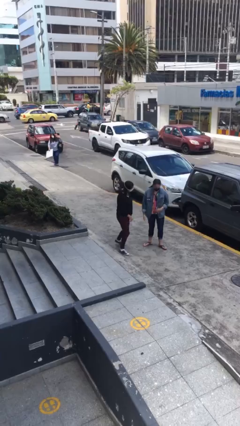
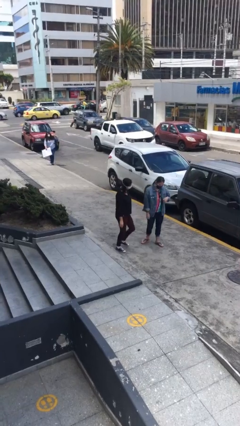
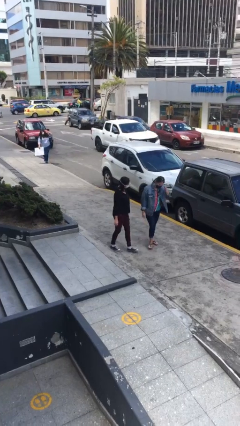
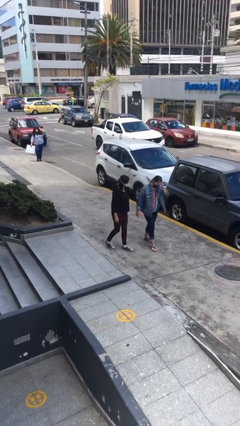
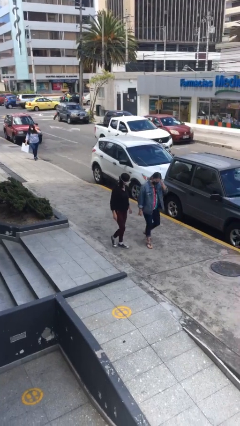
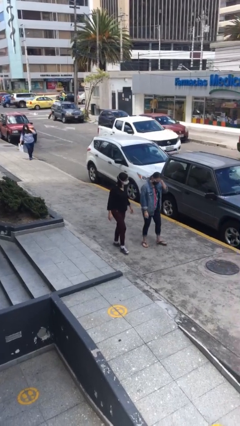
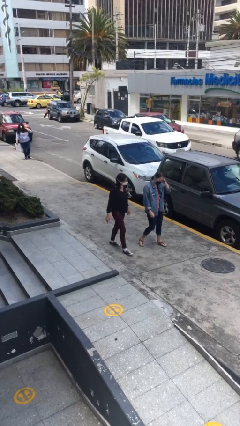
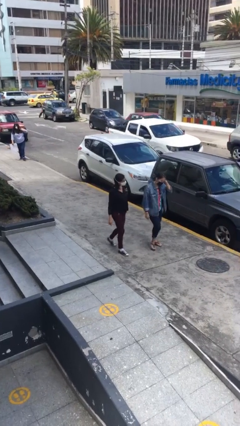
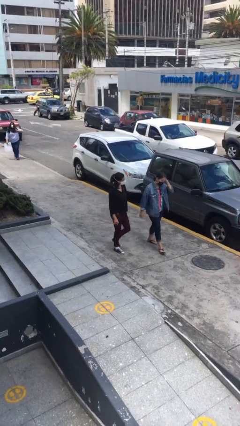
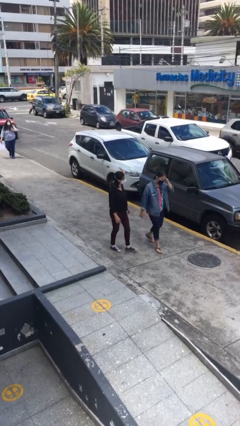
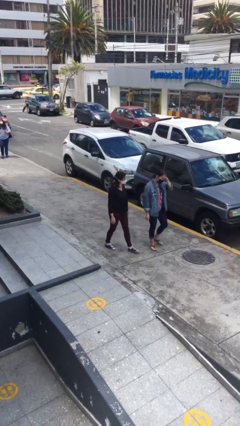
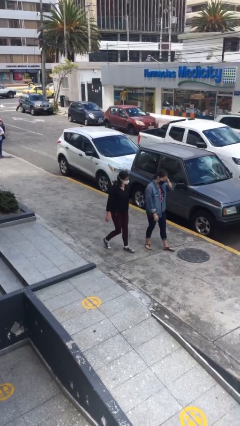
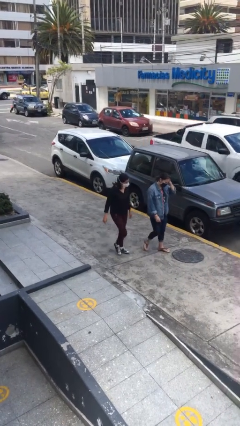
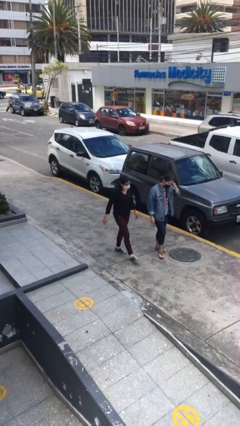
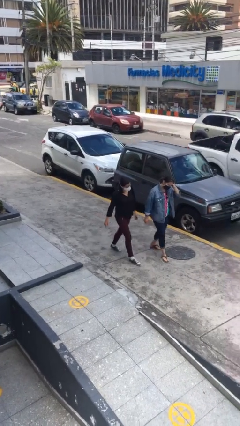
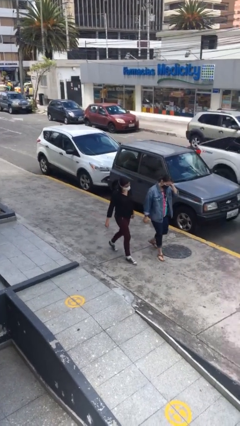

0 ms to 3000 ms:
person talks to person

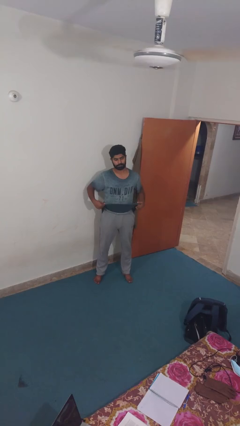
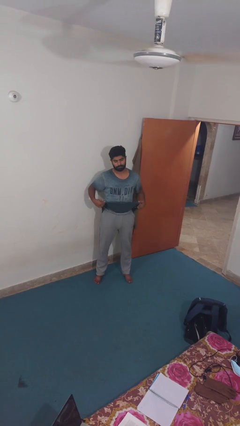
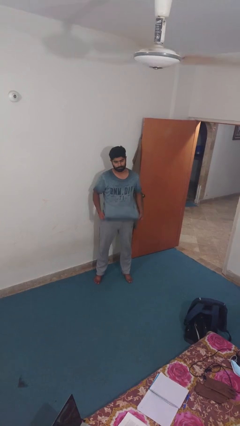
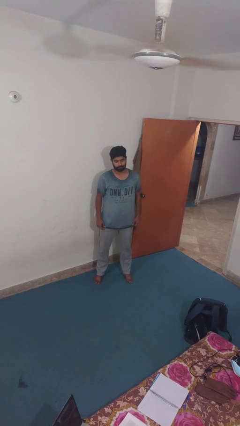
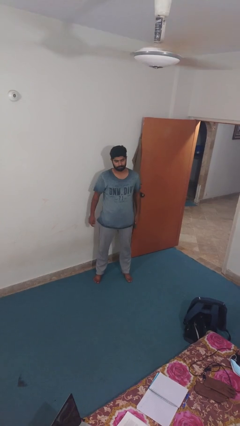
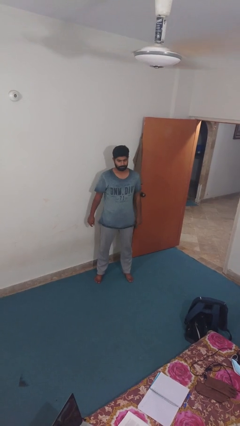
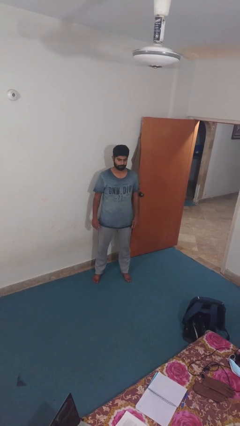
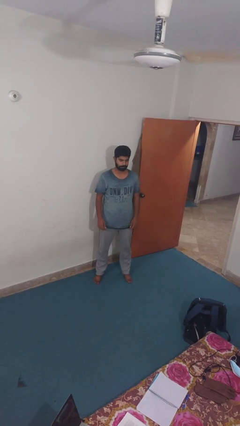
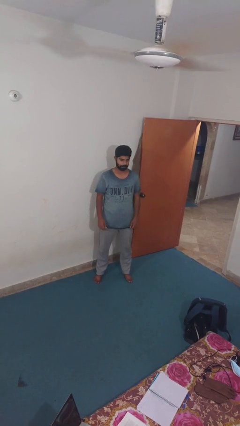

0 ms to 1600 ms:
person untucks shirt

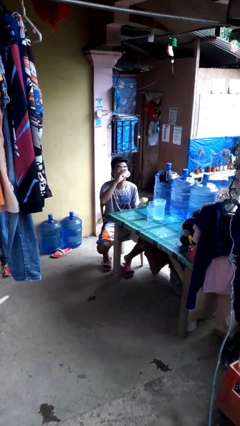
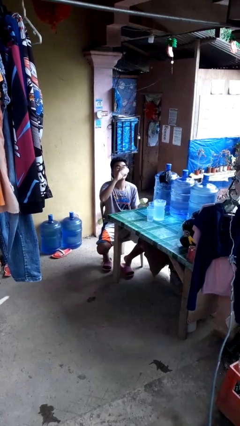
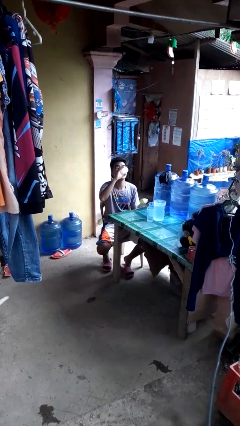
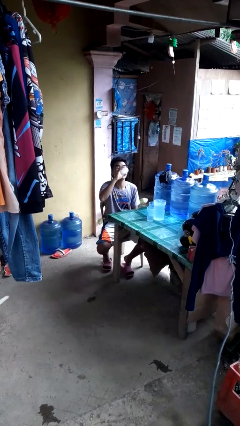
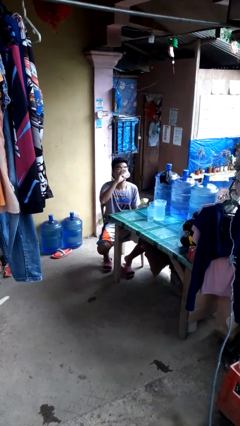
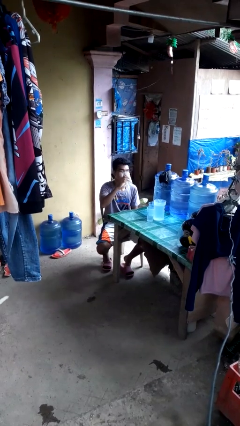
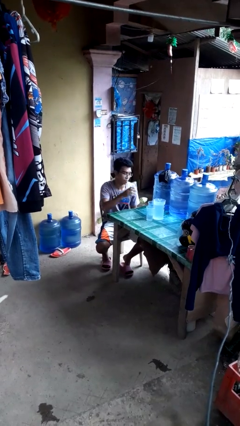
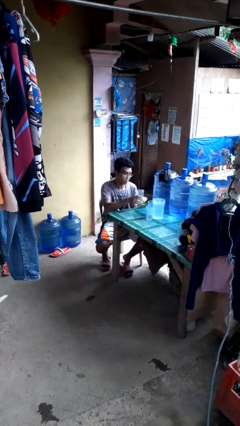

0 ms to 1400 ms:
person drinks from shotglass

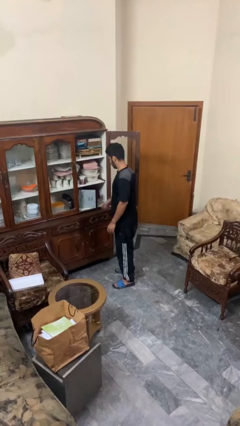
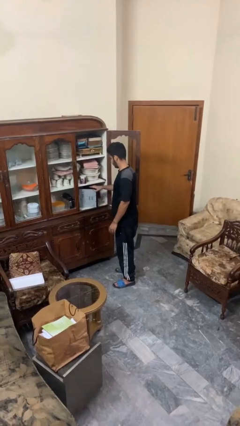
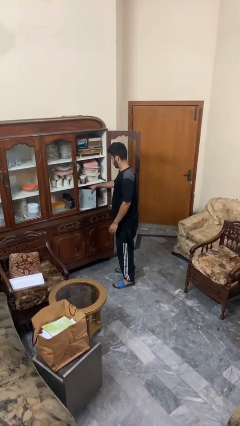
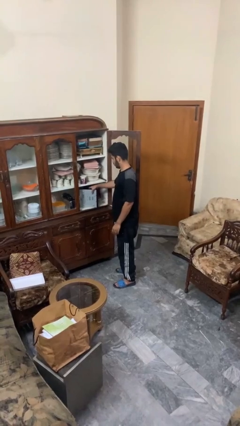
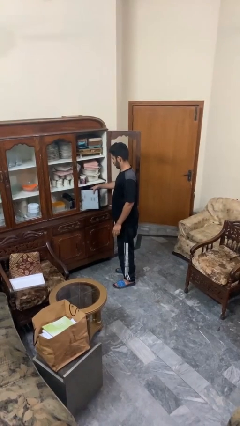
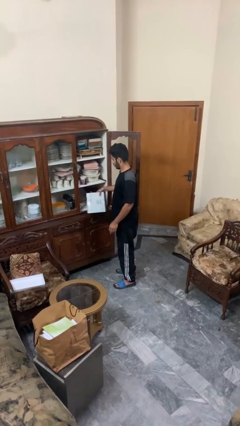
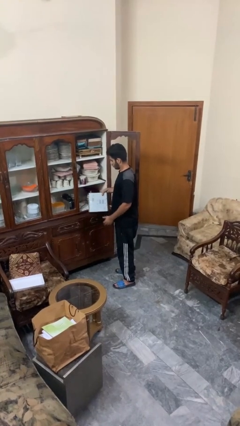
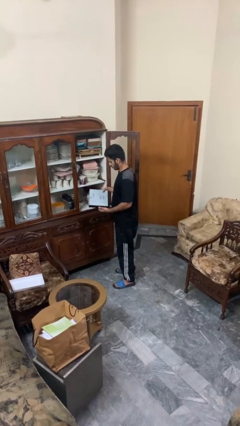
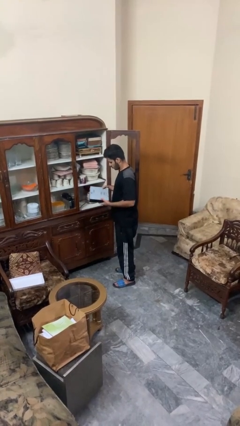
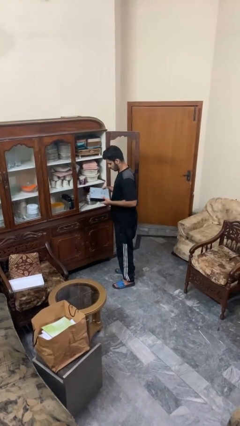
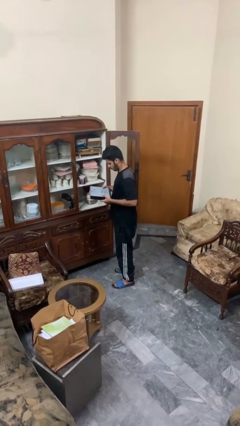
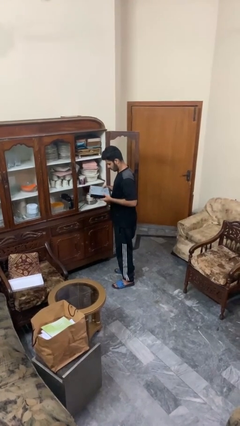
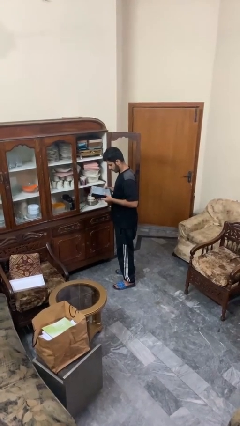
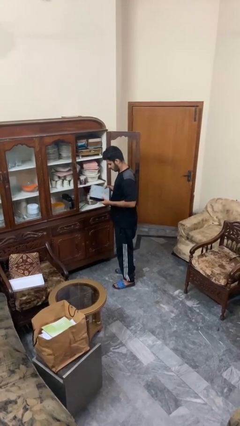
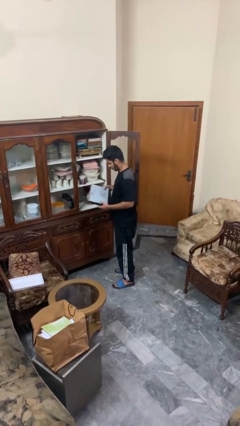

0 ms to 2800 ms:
person picks up object from cabinet

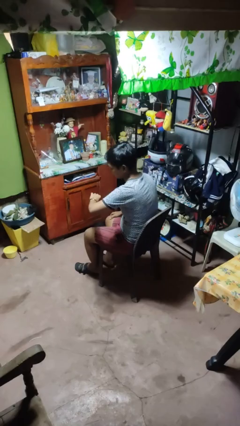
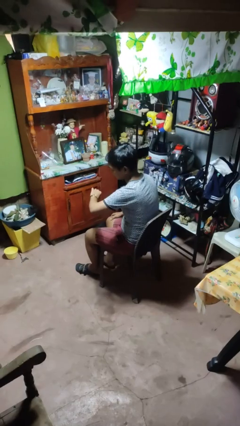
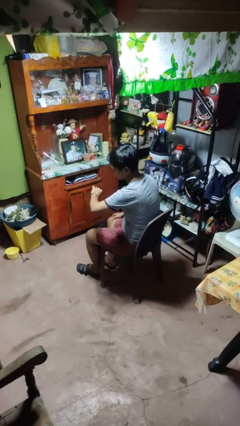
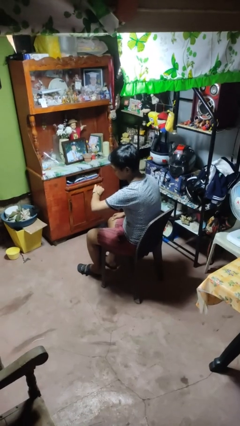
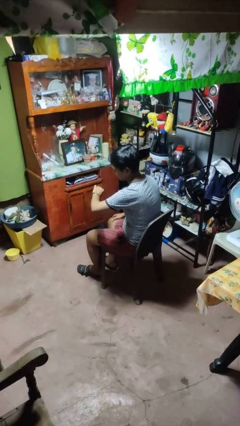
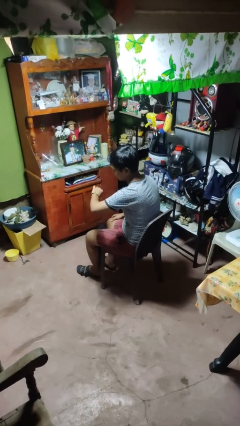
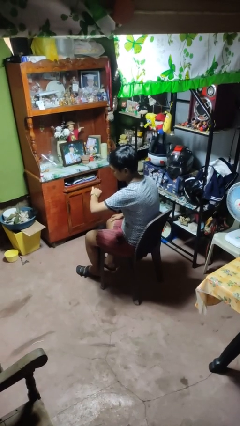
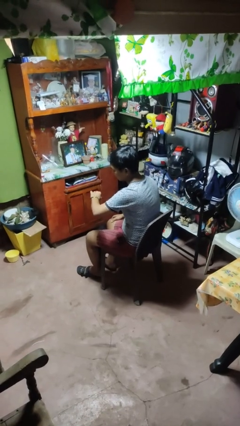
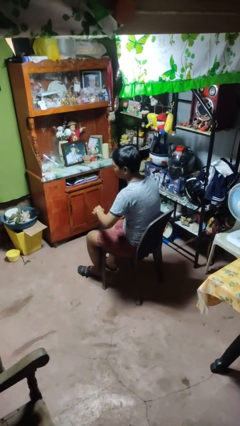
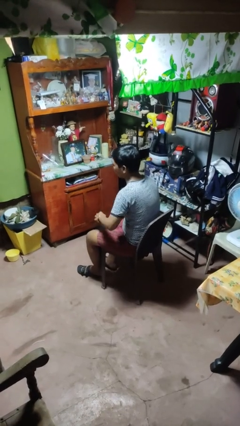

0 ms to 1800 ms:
person looks at wristwatch

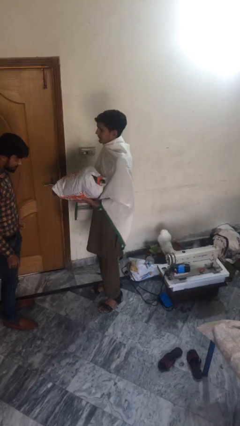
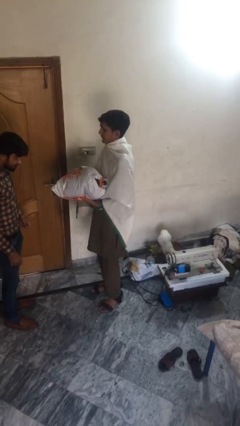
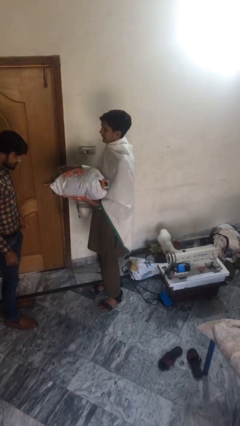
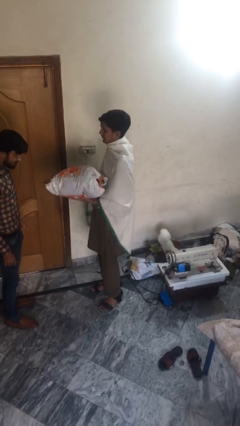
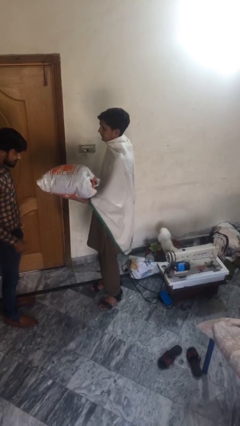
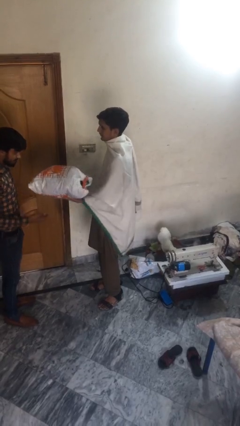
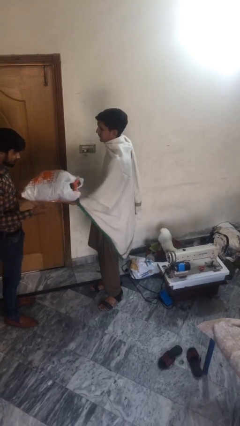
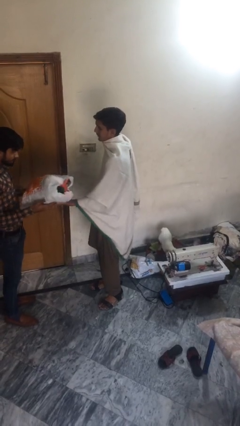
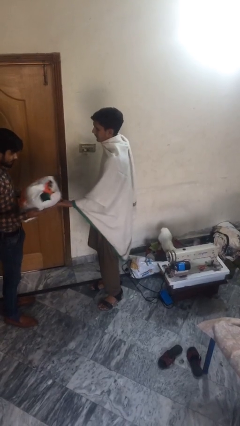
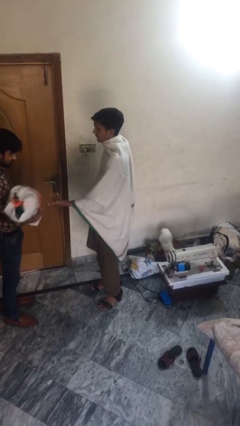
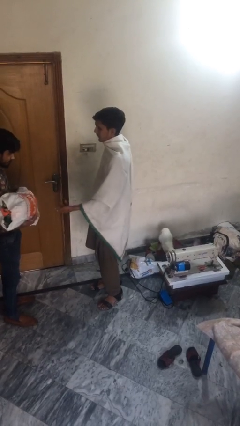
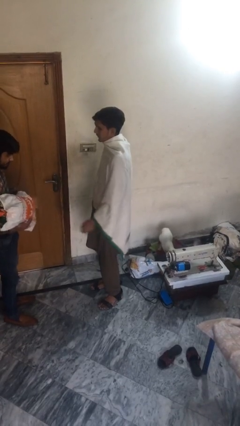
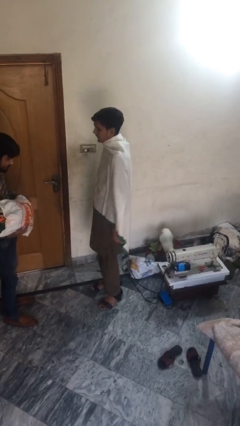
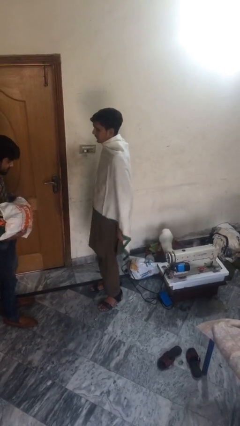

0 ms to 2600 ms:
person transfers object to person

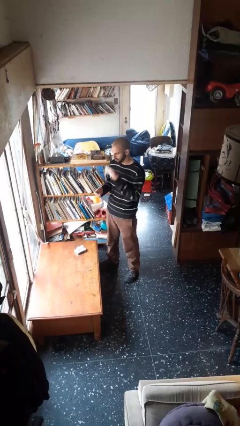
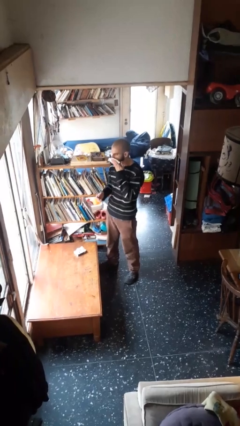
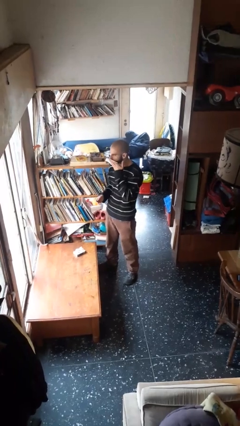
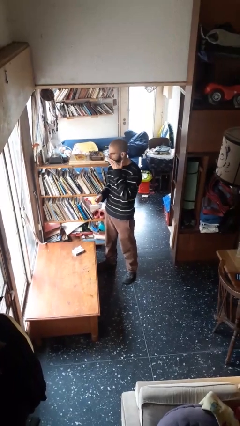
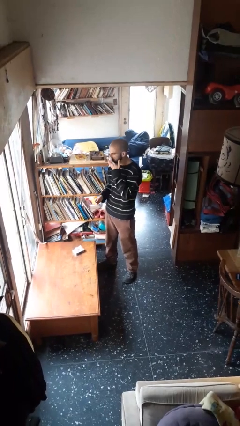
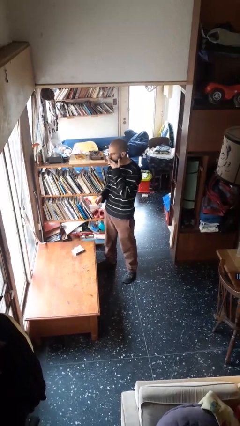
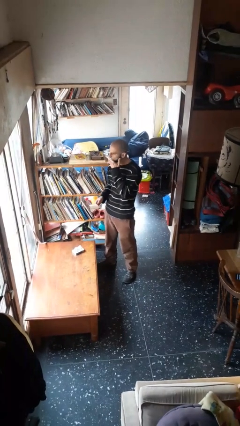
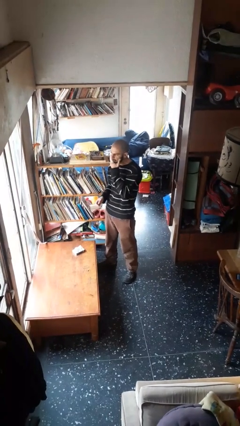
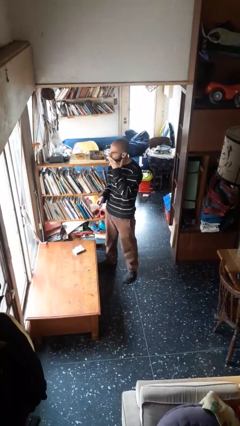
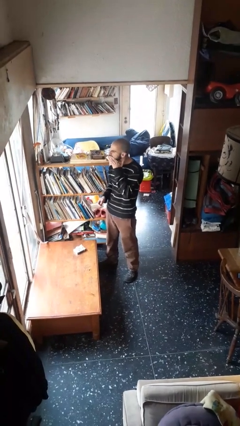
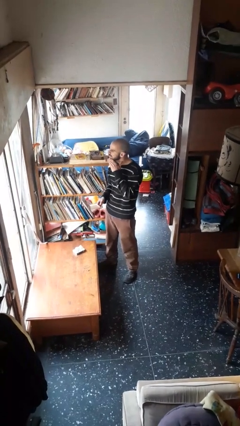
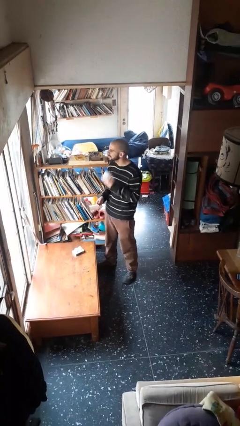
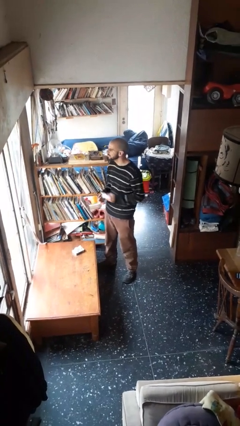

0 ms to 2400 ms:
person wipes mouth with napkin

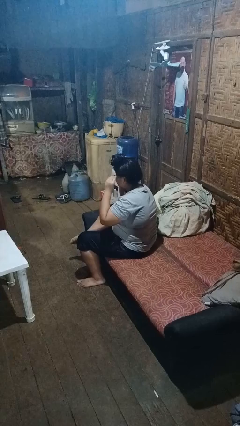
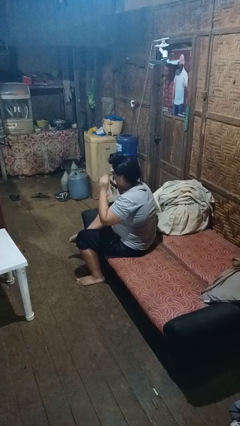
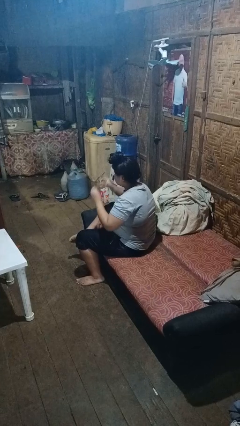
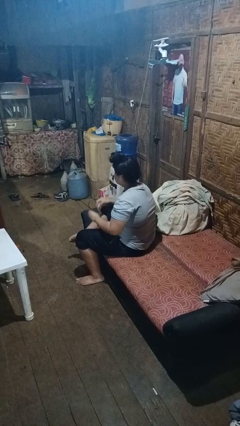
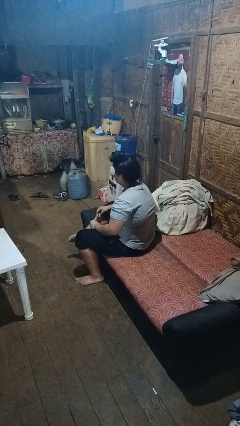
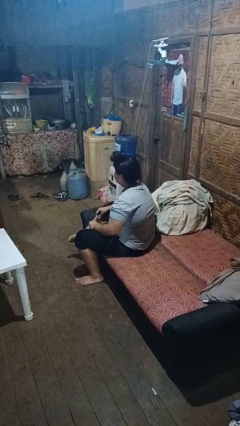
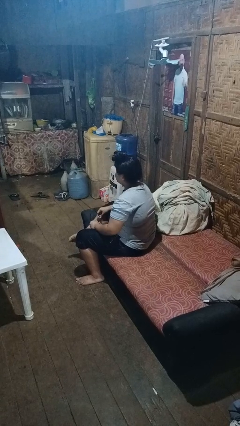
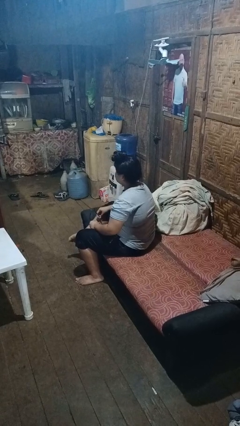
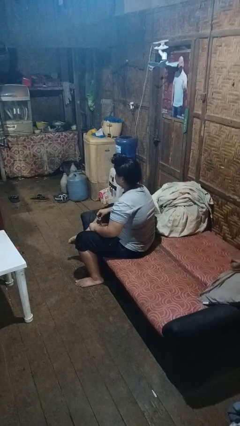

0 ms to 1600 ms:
person takes off glasses
